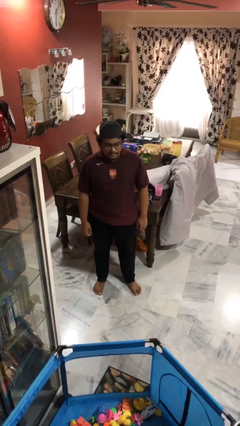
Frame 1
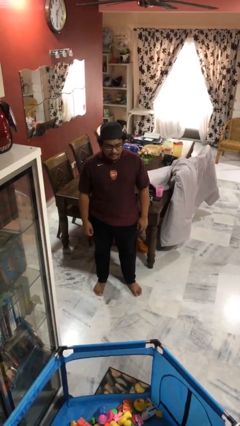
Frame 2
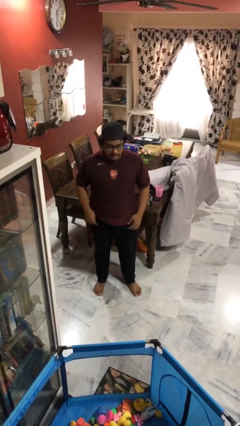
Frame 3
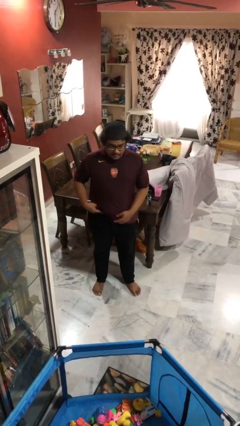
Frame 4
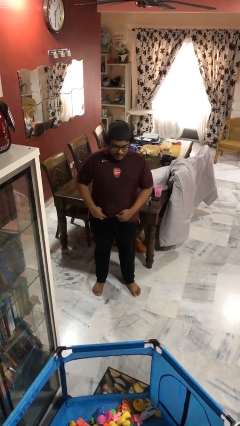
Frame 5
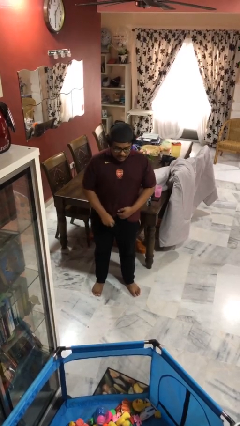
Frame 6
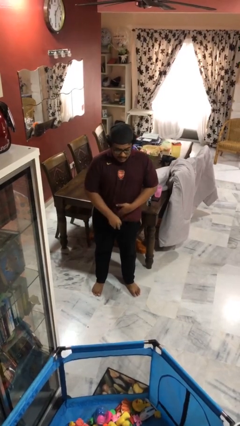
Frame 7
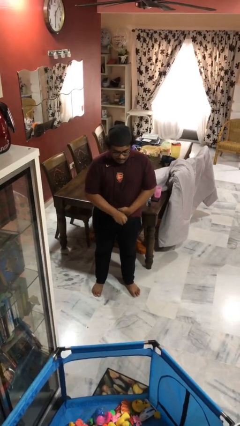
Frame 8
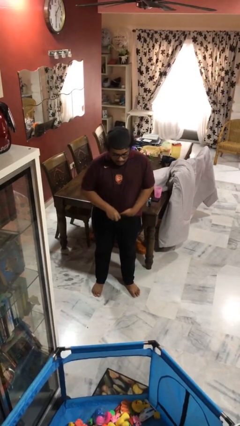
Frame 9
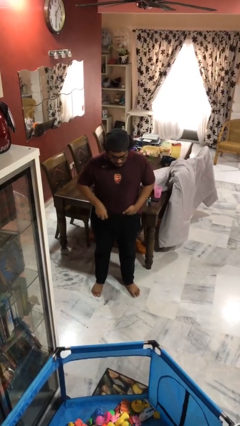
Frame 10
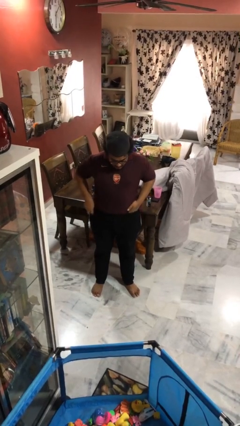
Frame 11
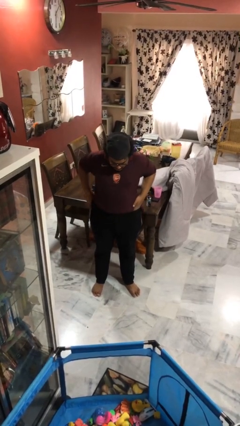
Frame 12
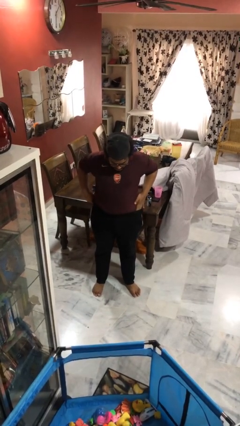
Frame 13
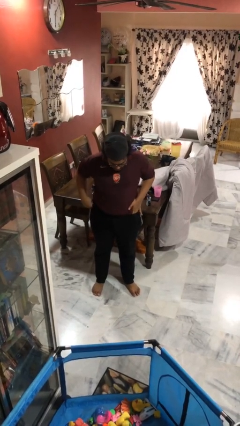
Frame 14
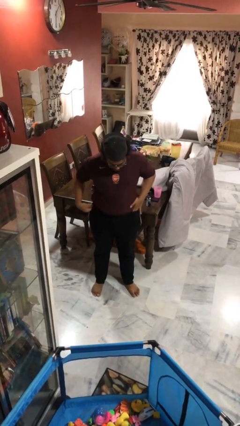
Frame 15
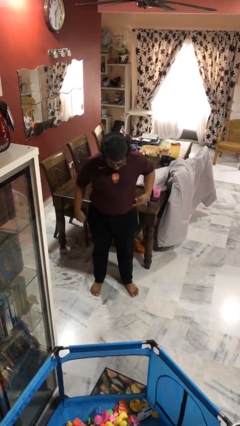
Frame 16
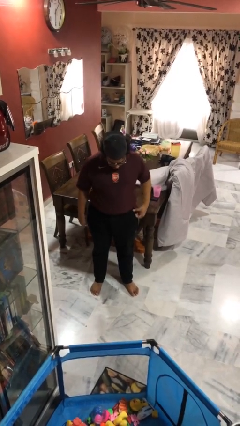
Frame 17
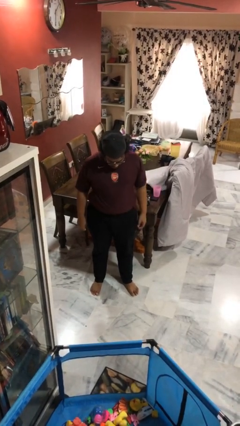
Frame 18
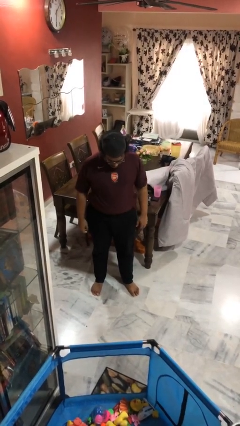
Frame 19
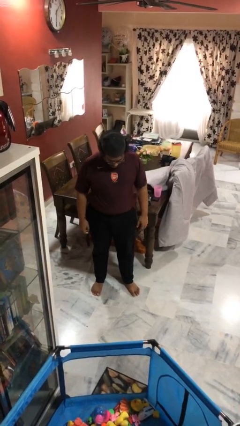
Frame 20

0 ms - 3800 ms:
person tucks in shirt

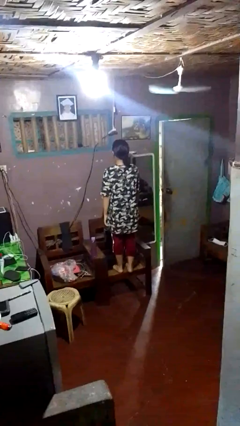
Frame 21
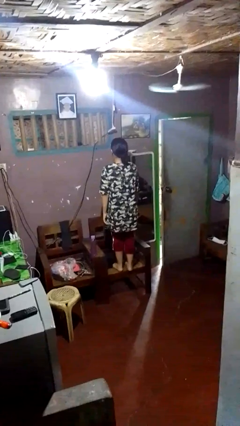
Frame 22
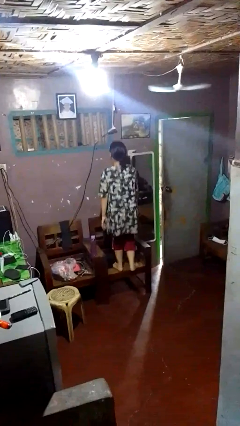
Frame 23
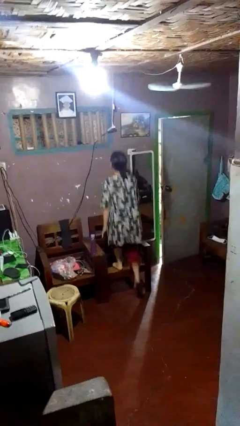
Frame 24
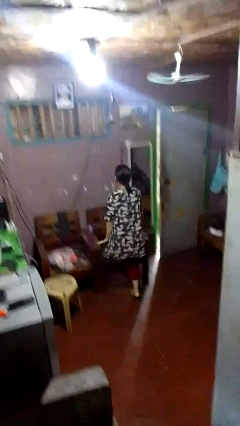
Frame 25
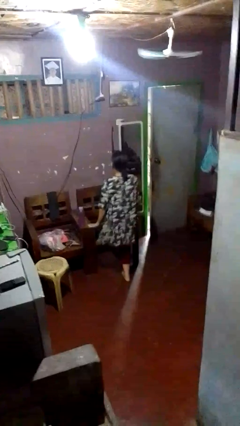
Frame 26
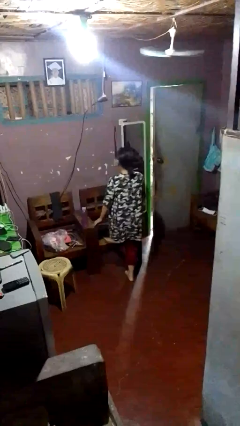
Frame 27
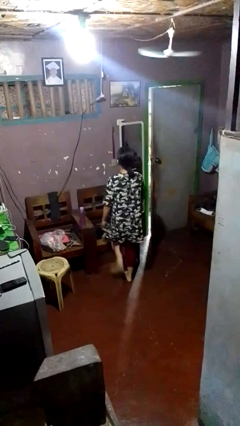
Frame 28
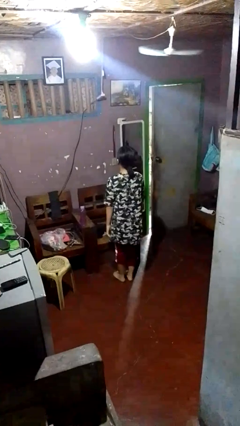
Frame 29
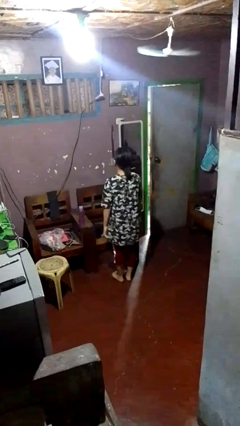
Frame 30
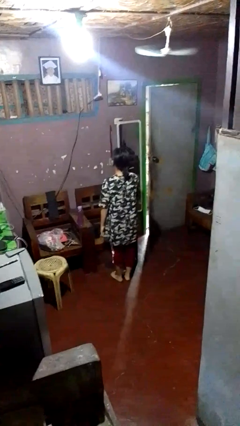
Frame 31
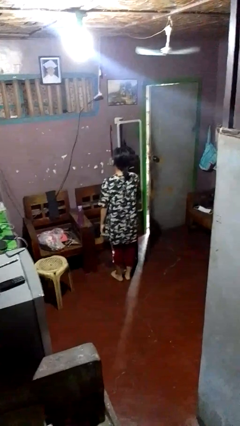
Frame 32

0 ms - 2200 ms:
person climbs off chair

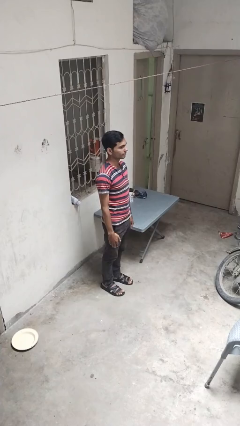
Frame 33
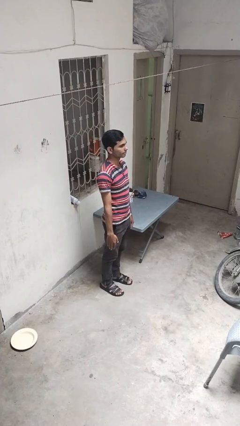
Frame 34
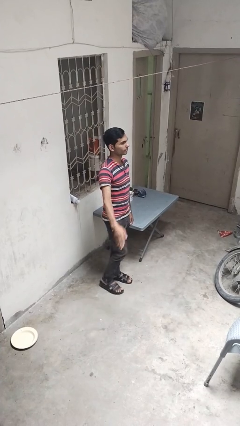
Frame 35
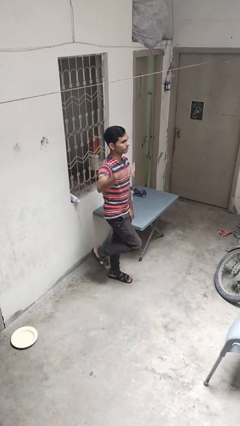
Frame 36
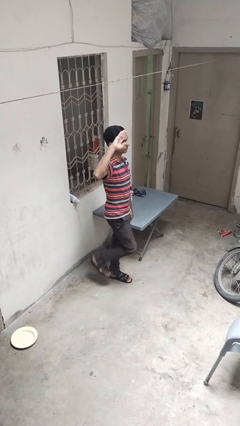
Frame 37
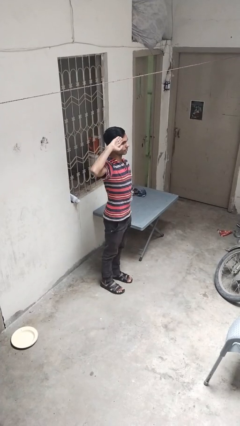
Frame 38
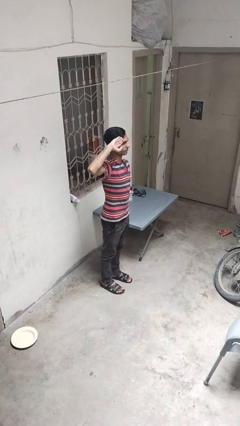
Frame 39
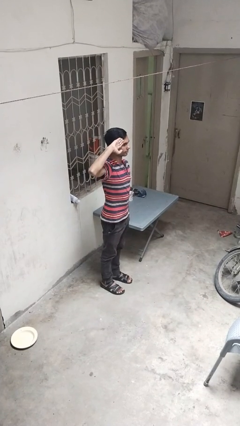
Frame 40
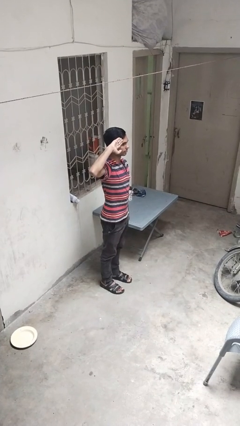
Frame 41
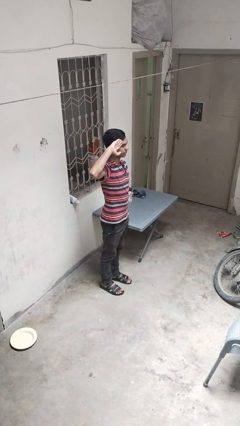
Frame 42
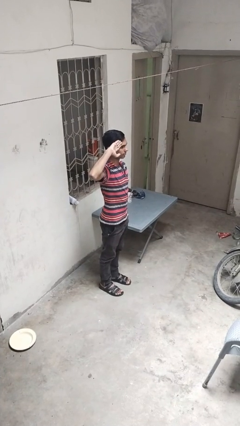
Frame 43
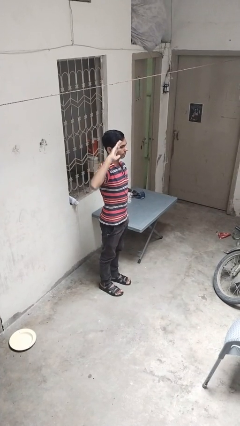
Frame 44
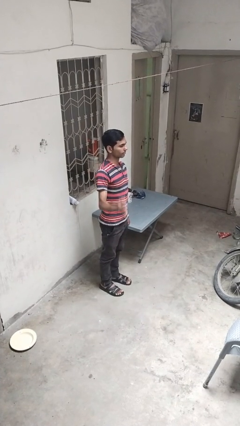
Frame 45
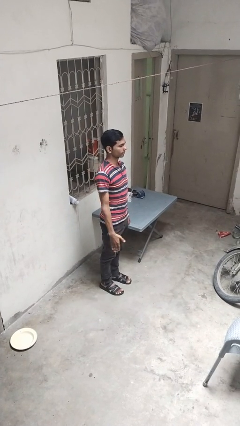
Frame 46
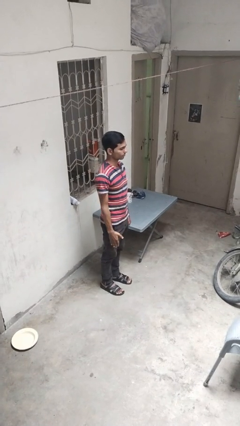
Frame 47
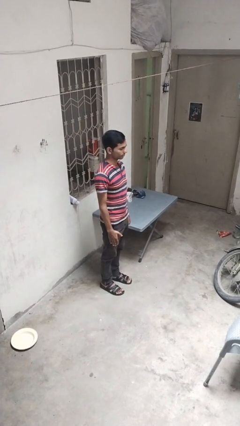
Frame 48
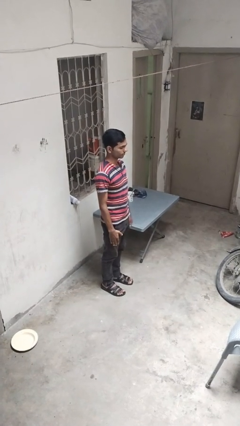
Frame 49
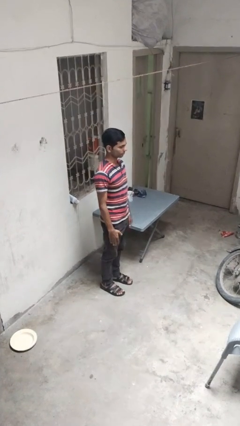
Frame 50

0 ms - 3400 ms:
person salutes

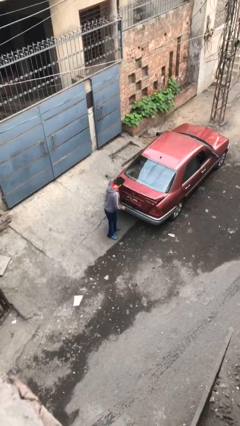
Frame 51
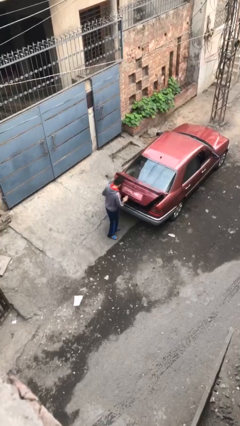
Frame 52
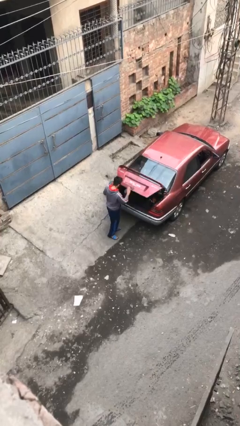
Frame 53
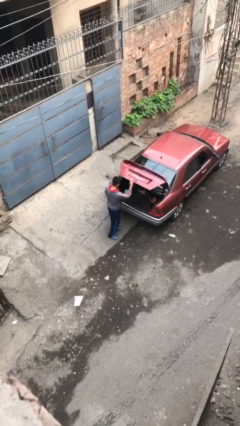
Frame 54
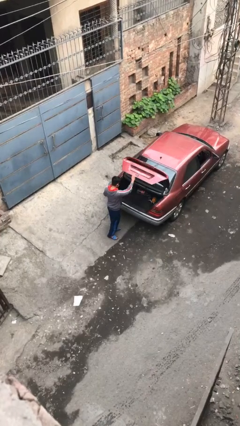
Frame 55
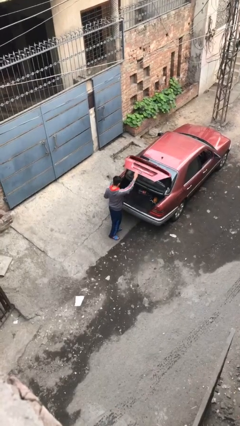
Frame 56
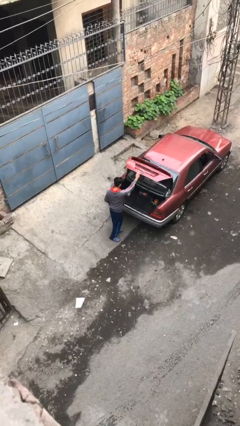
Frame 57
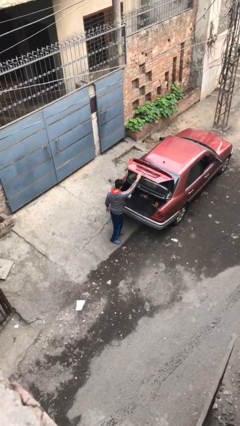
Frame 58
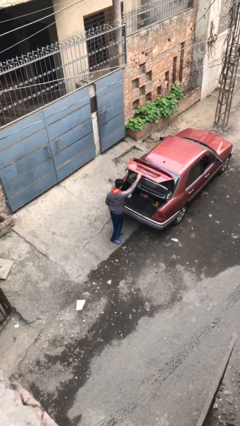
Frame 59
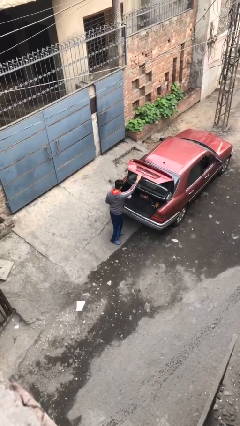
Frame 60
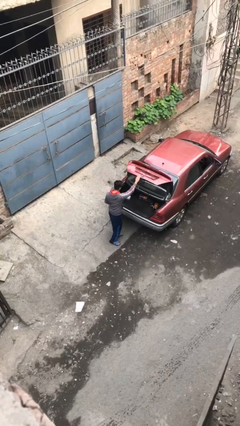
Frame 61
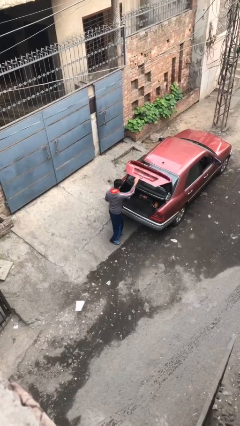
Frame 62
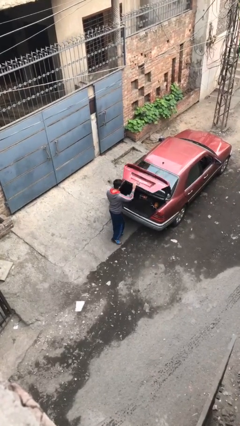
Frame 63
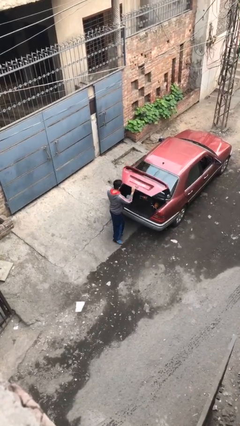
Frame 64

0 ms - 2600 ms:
person opens car trunk

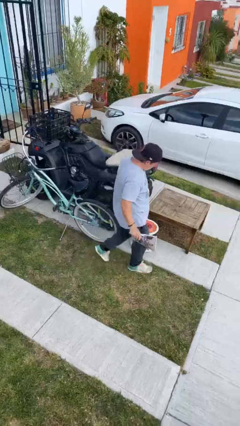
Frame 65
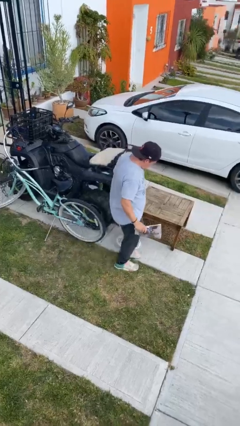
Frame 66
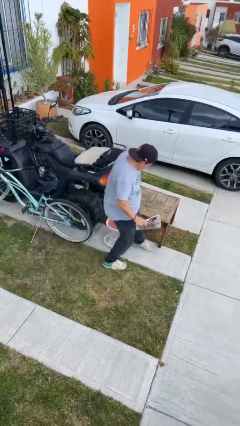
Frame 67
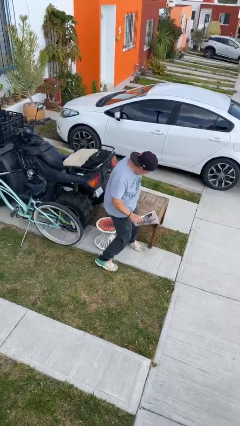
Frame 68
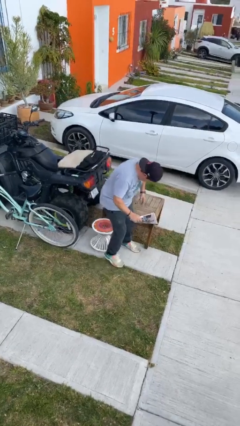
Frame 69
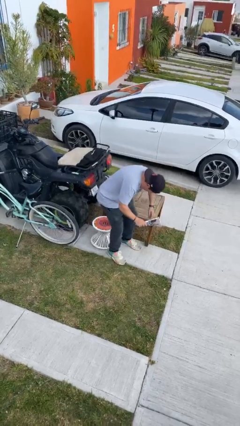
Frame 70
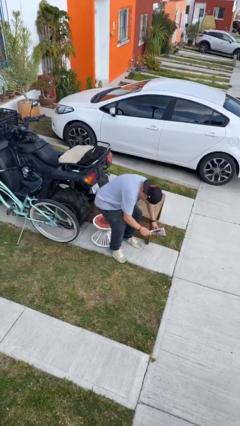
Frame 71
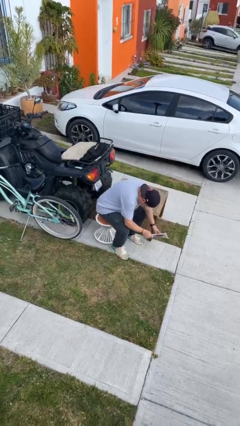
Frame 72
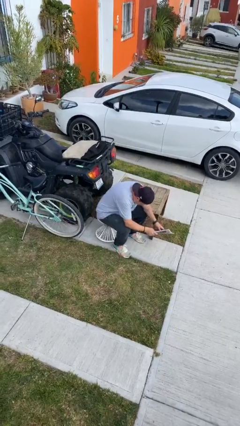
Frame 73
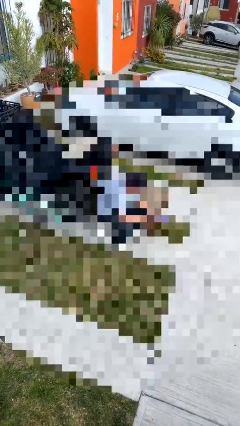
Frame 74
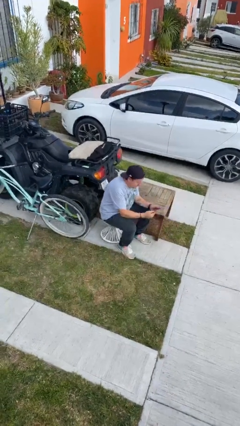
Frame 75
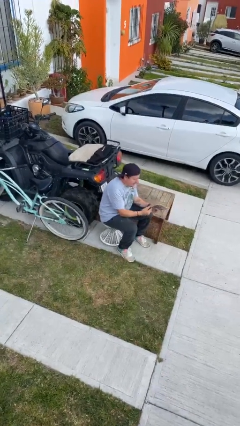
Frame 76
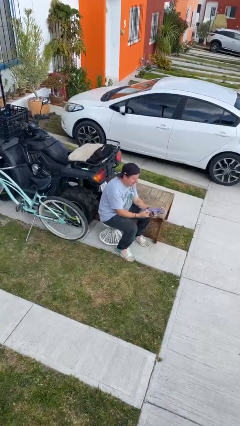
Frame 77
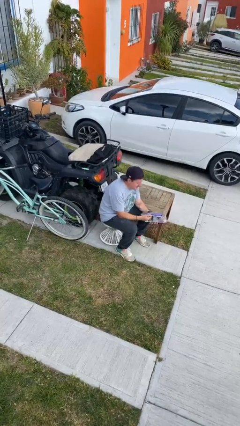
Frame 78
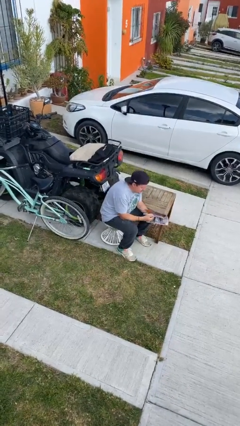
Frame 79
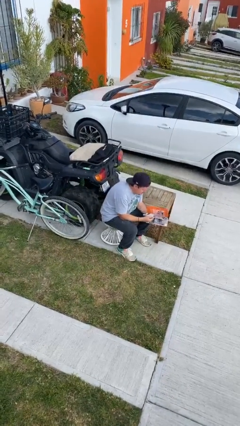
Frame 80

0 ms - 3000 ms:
person sits down

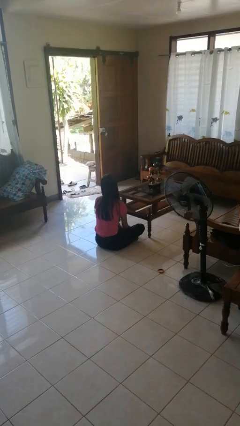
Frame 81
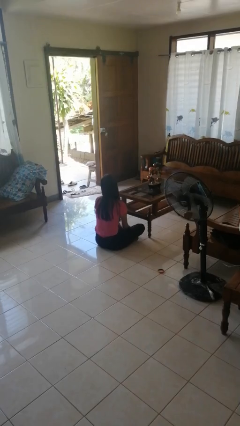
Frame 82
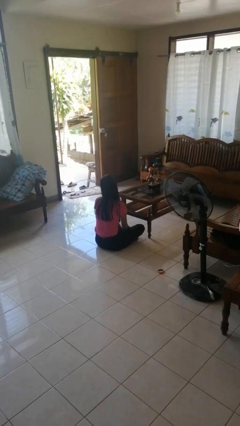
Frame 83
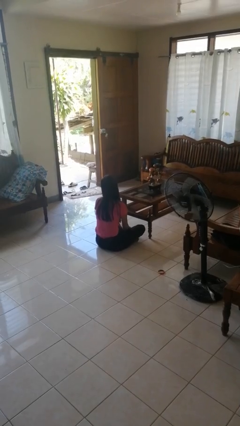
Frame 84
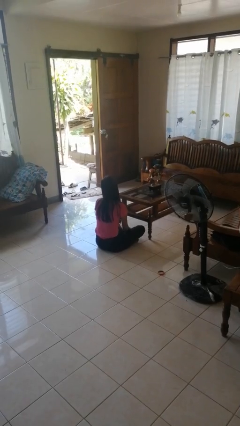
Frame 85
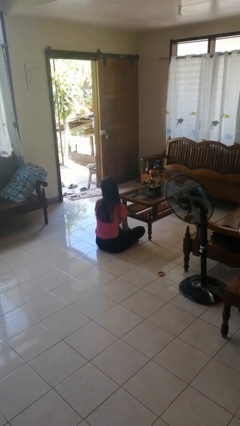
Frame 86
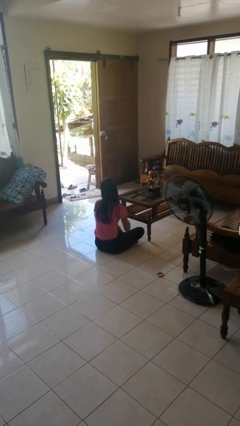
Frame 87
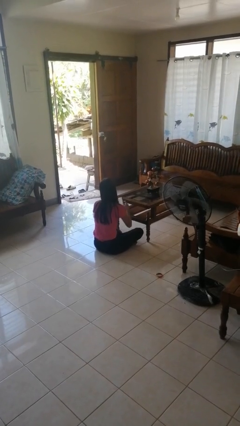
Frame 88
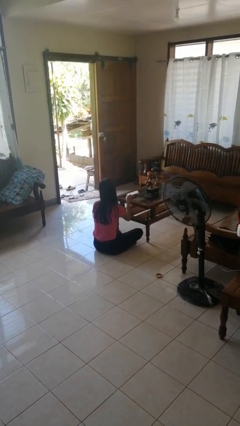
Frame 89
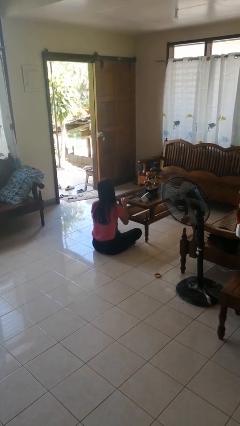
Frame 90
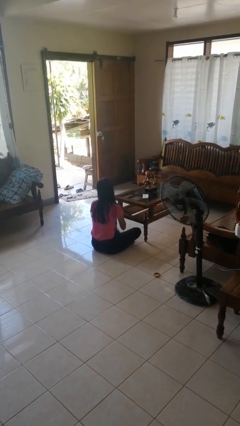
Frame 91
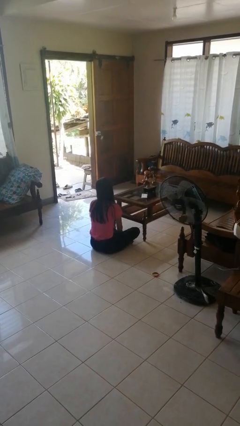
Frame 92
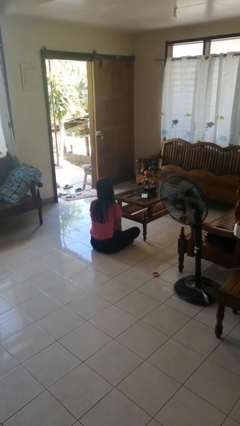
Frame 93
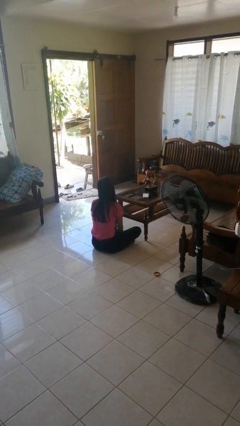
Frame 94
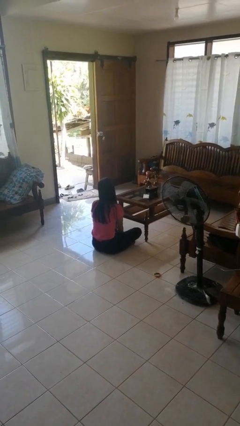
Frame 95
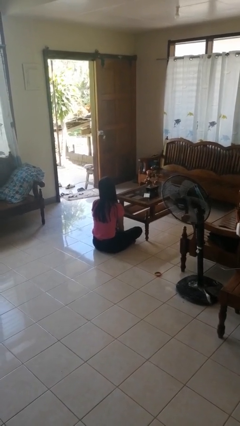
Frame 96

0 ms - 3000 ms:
person throws object on table
